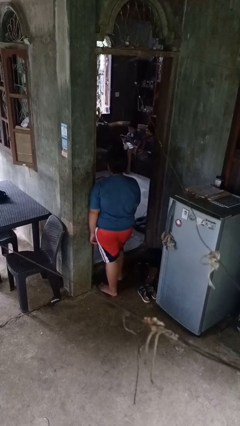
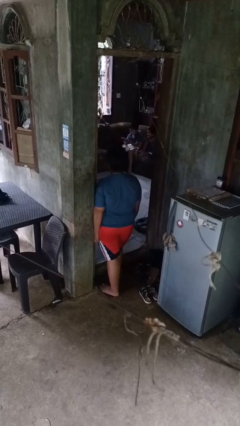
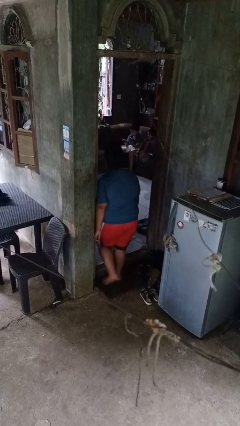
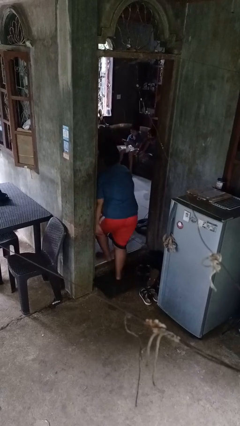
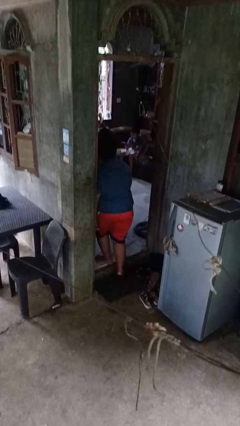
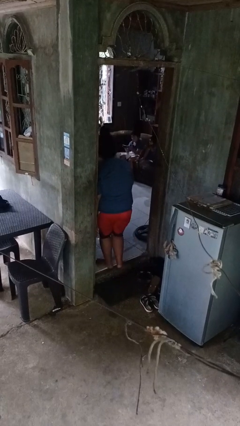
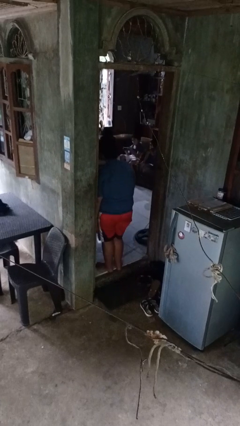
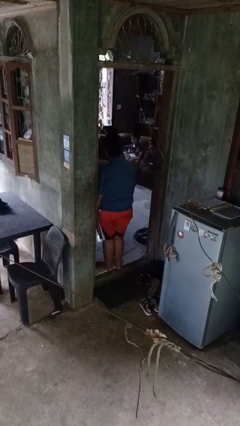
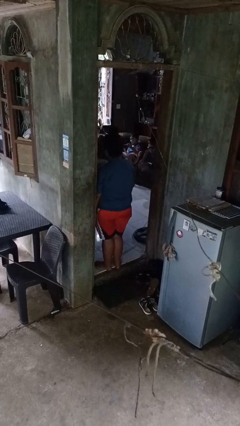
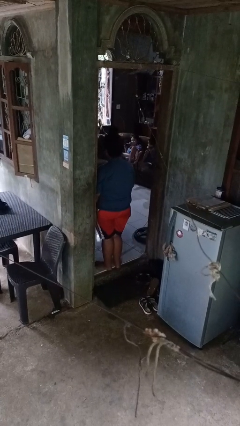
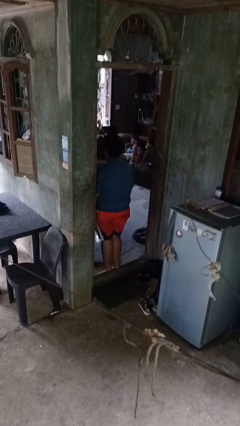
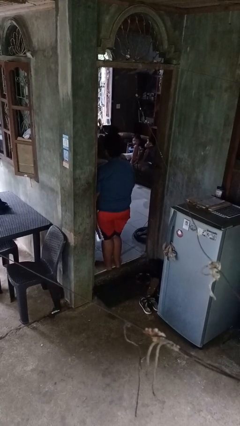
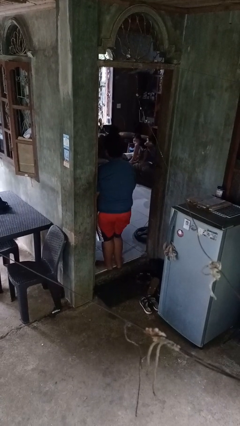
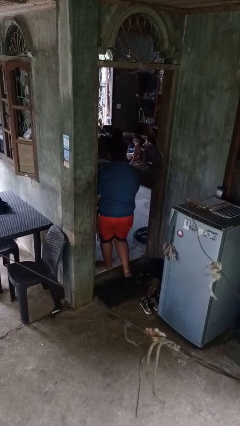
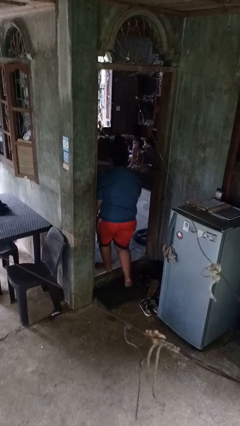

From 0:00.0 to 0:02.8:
person bumps into wall

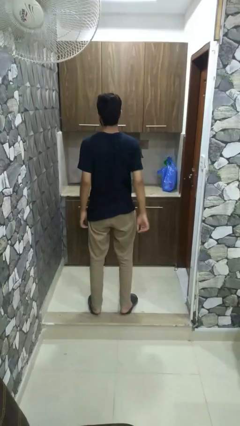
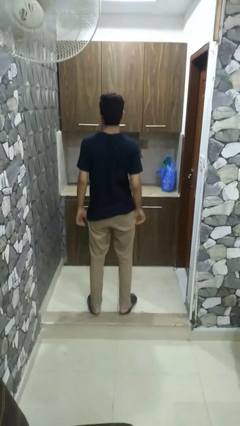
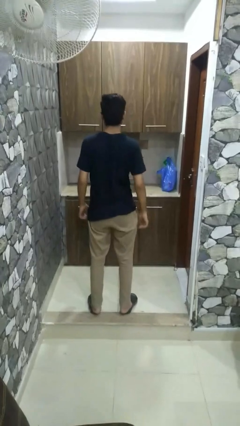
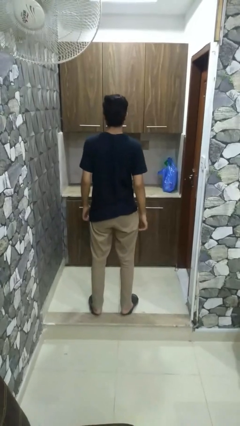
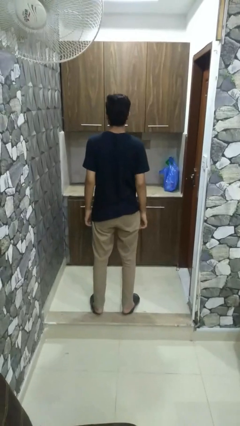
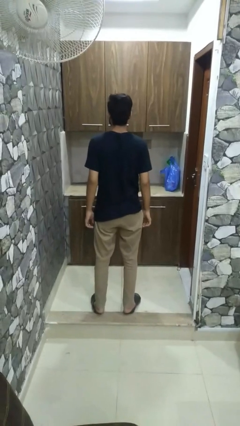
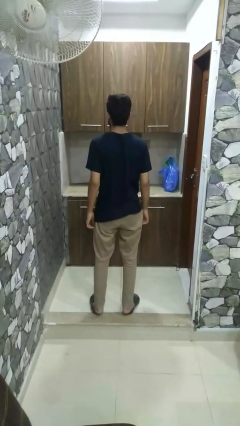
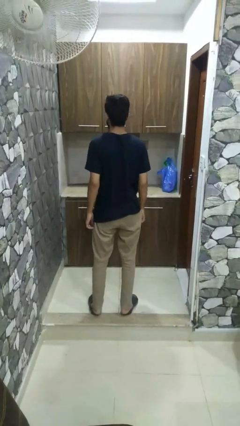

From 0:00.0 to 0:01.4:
person punches

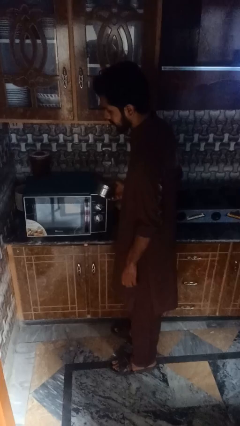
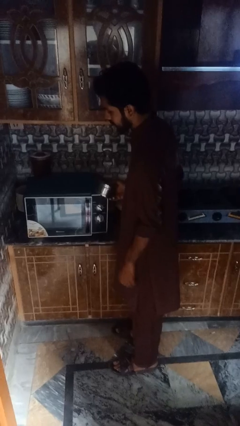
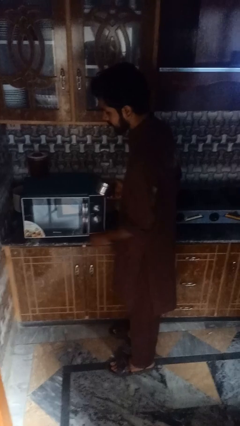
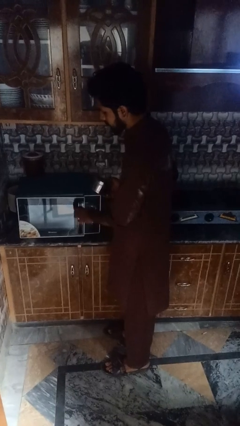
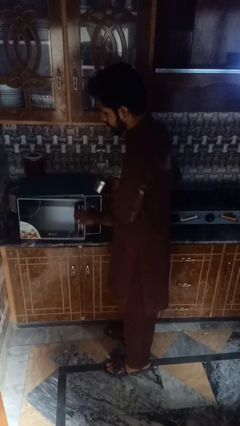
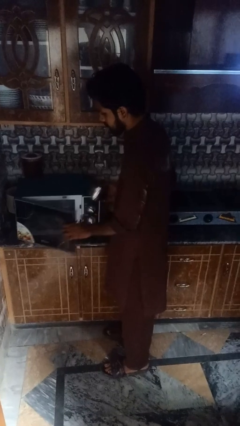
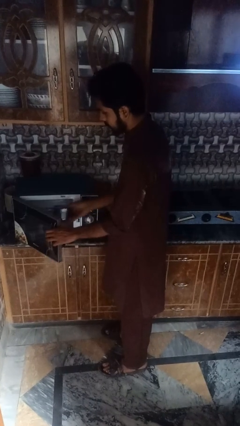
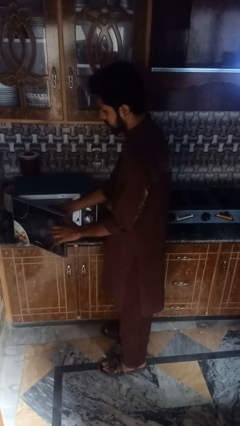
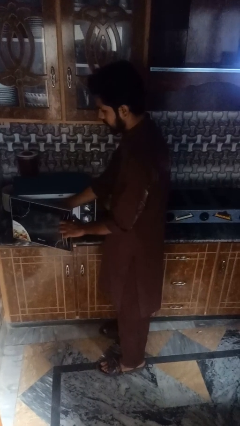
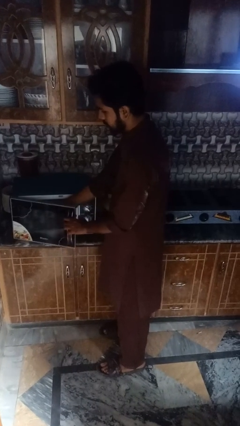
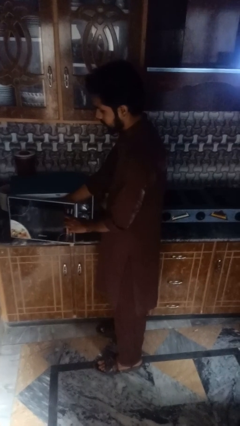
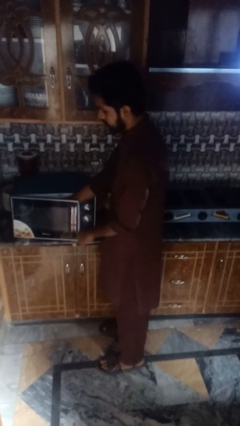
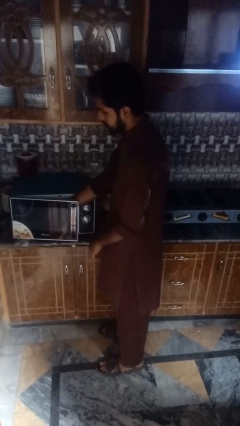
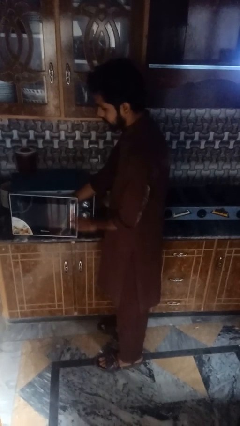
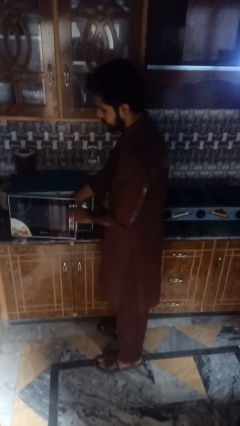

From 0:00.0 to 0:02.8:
person puts object into microwave

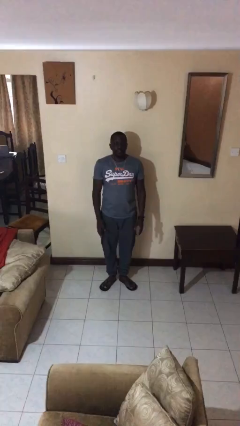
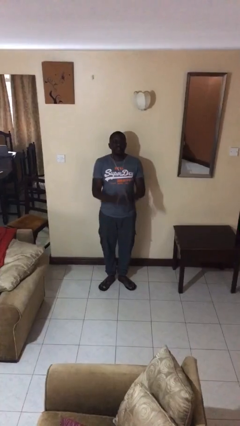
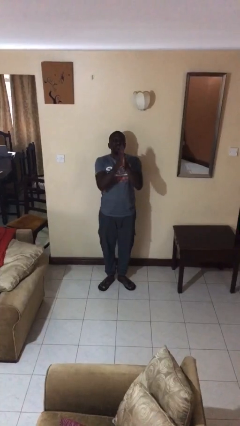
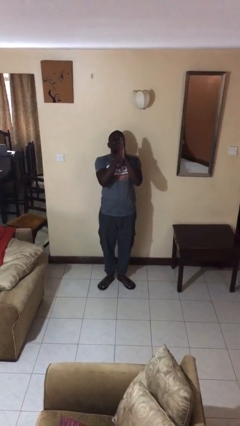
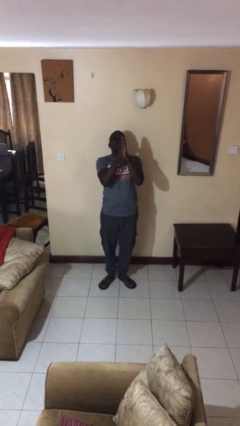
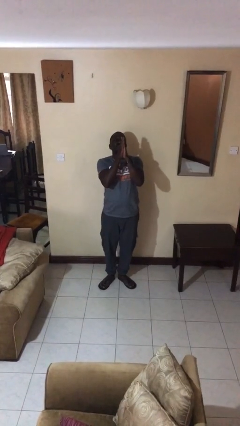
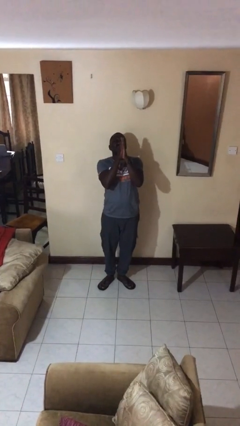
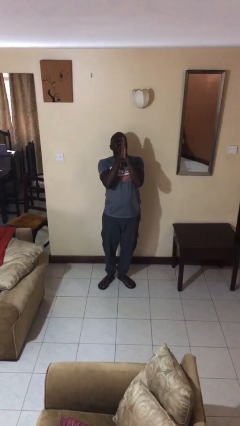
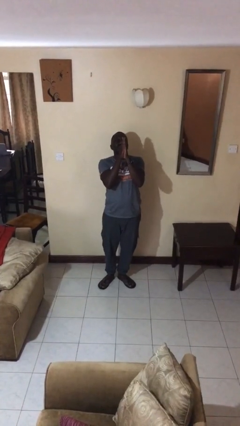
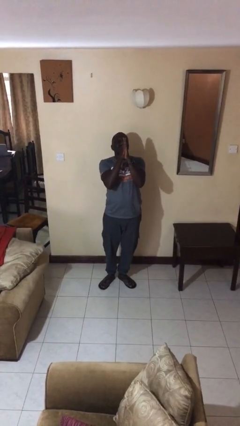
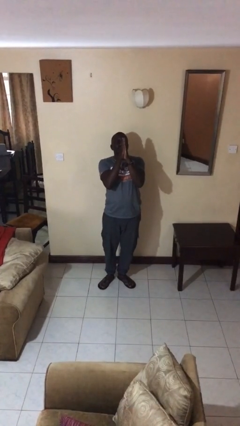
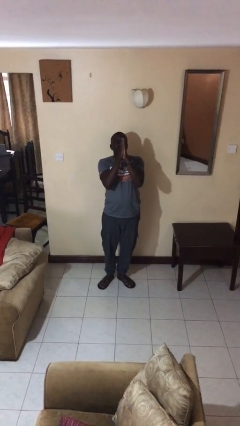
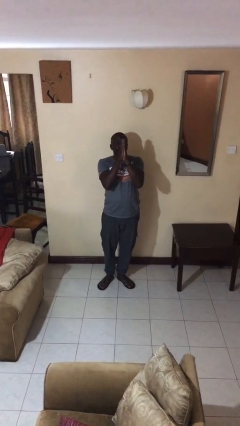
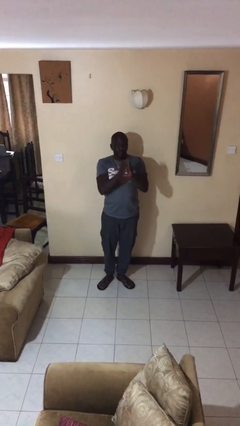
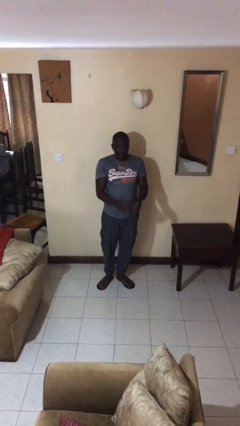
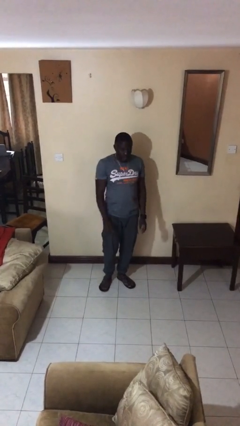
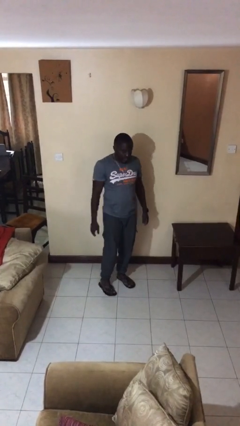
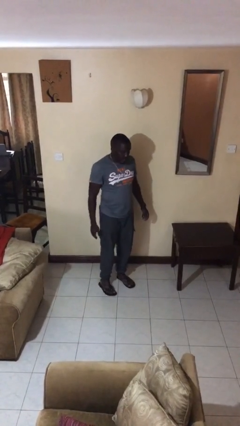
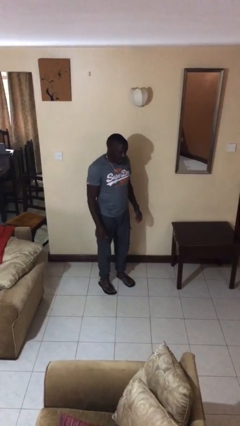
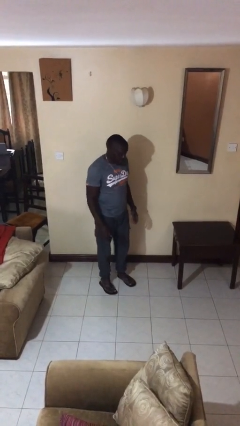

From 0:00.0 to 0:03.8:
person prays

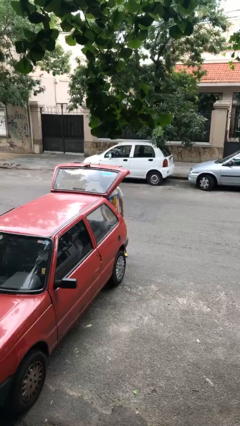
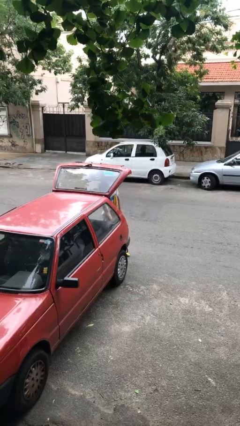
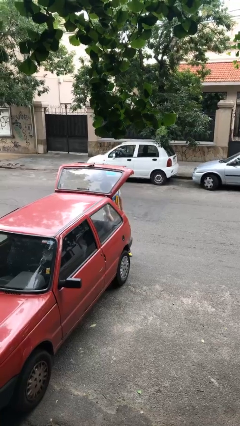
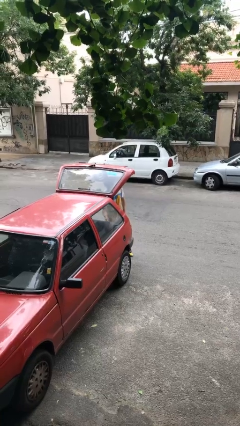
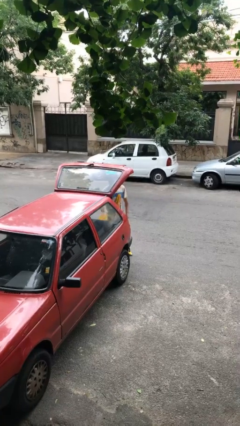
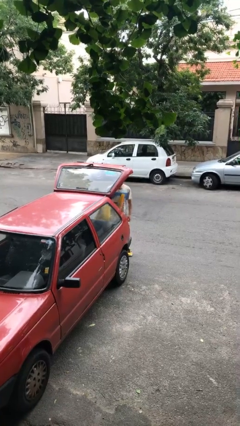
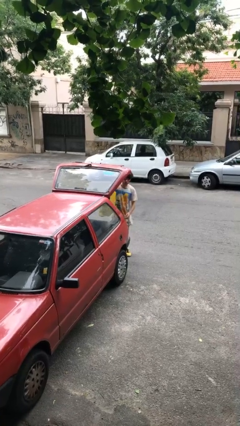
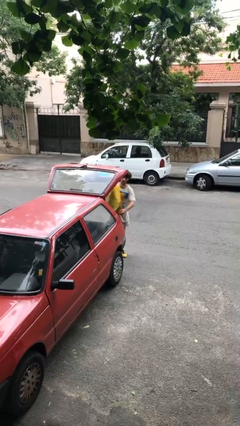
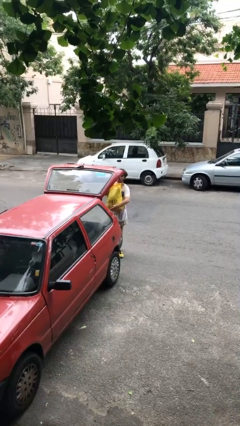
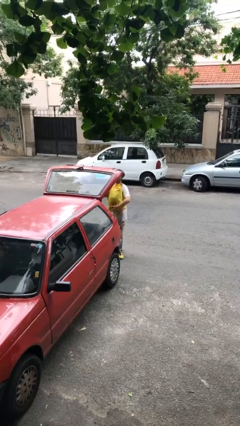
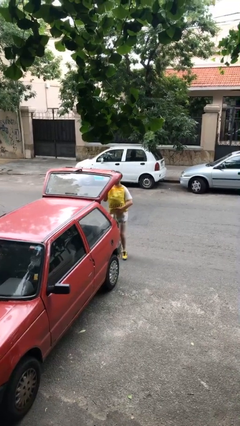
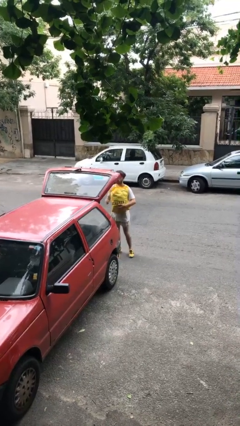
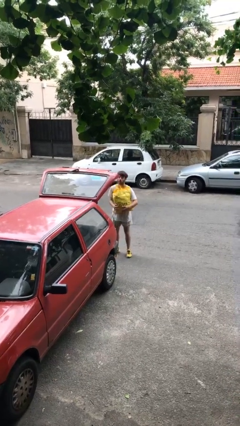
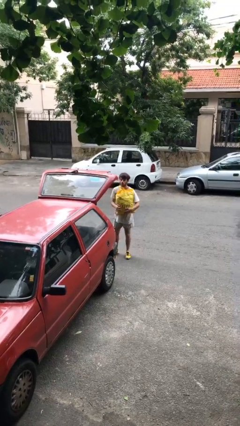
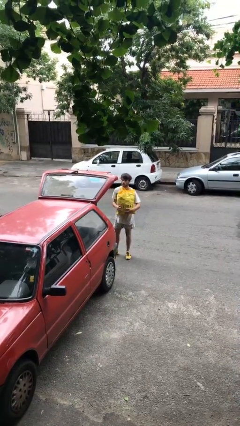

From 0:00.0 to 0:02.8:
person unloads car

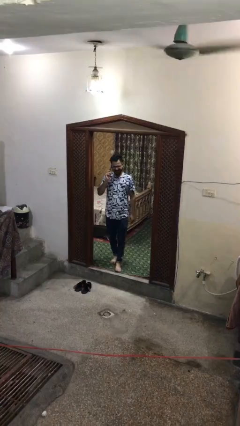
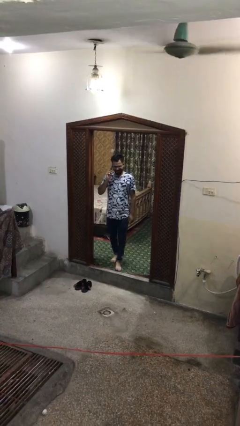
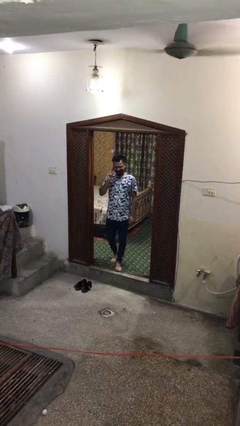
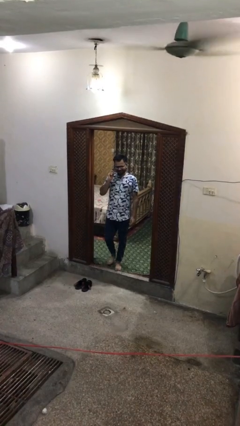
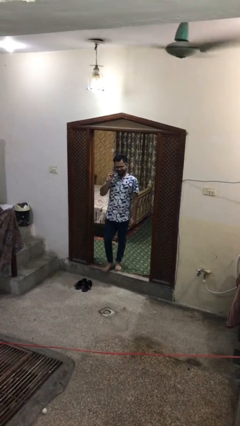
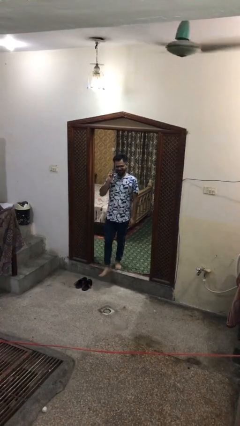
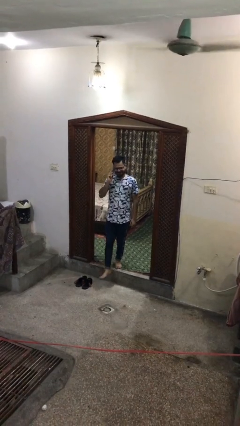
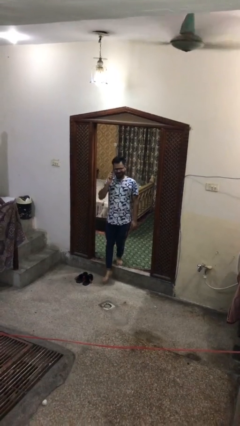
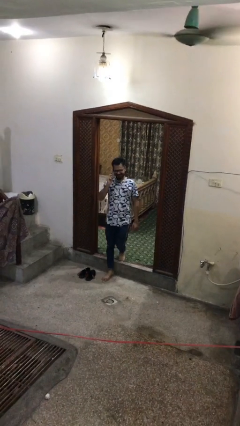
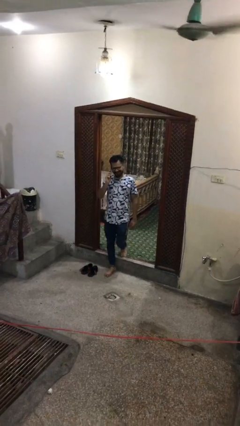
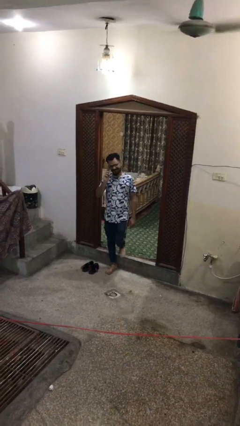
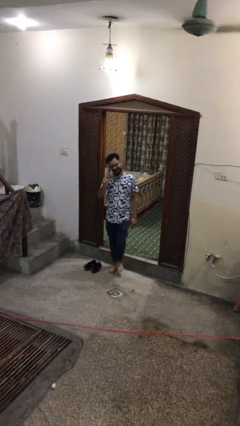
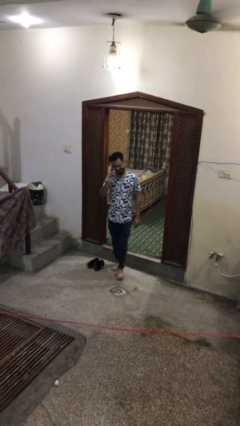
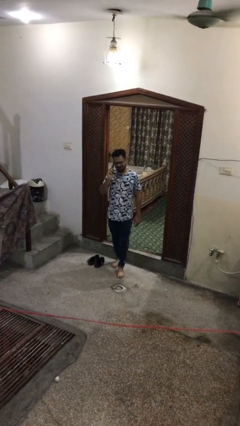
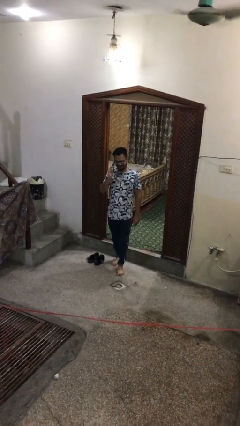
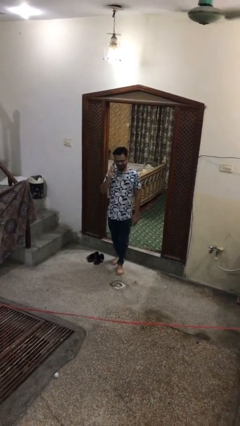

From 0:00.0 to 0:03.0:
person enters scene through structure

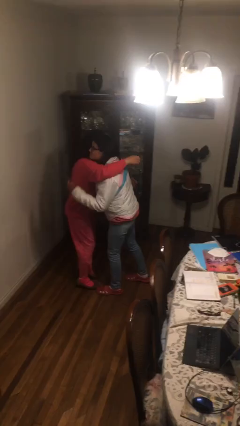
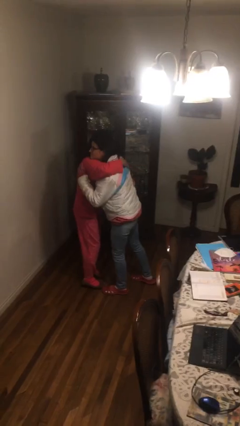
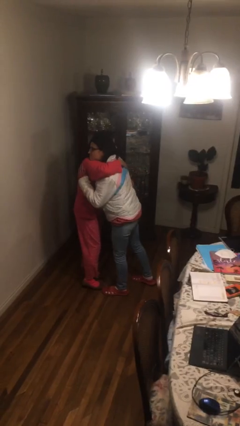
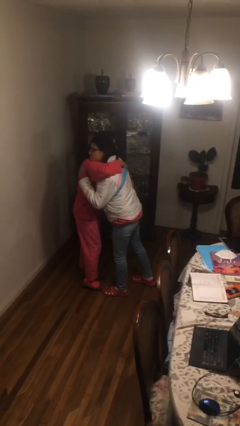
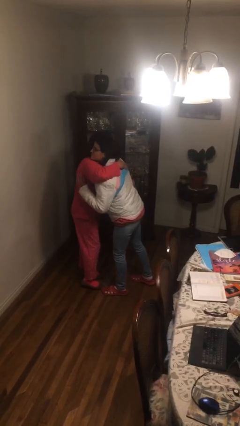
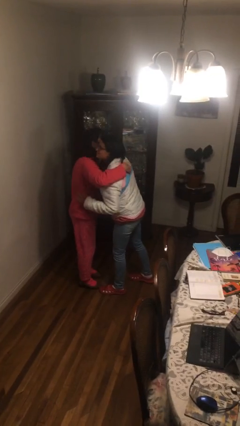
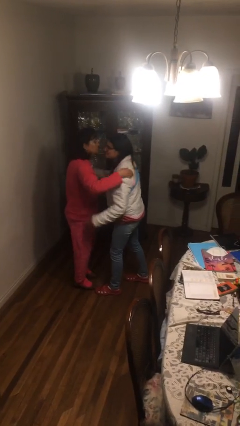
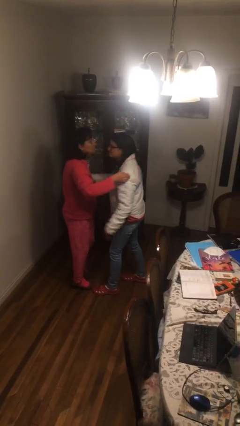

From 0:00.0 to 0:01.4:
person embraces person
